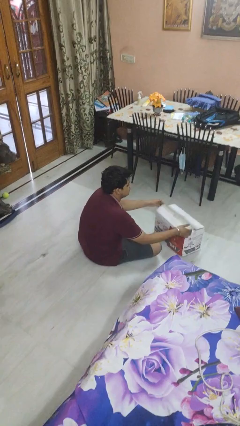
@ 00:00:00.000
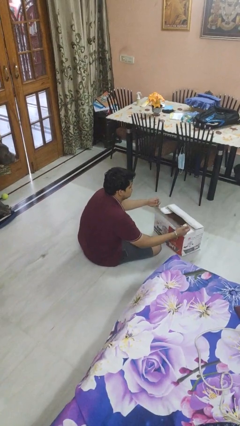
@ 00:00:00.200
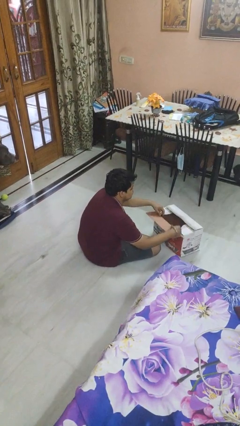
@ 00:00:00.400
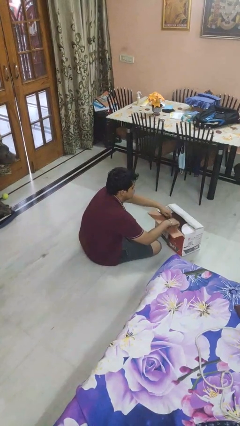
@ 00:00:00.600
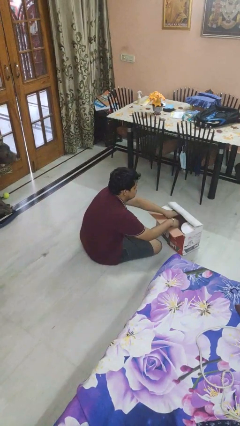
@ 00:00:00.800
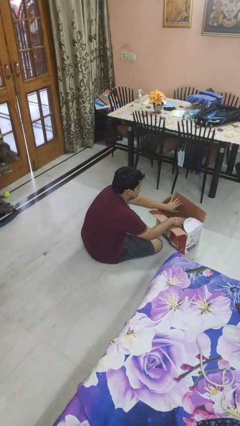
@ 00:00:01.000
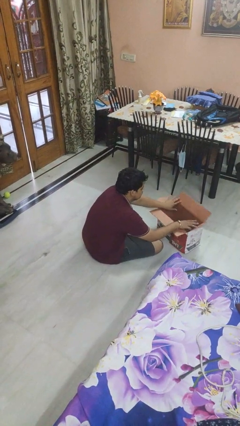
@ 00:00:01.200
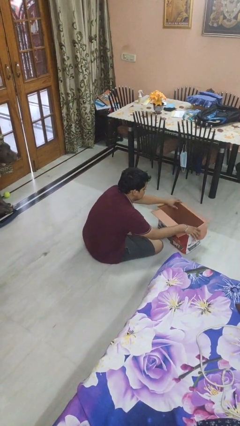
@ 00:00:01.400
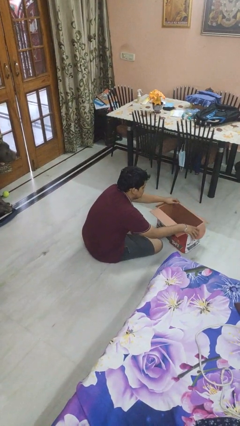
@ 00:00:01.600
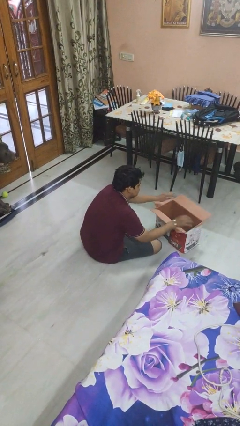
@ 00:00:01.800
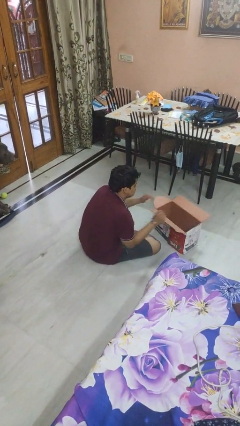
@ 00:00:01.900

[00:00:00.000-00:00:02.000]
person opens box

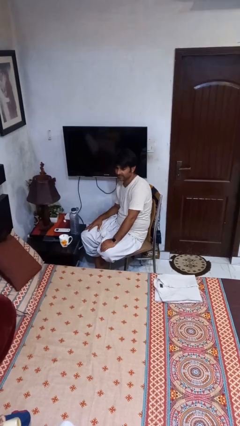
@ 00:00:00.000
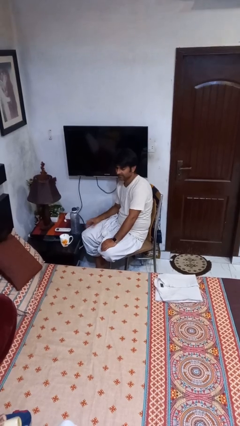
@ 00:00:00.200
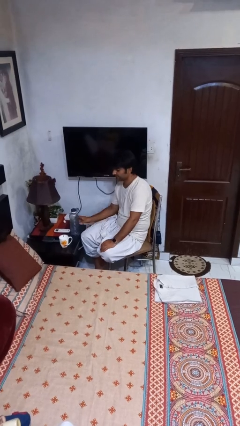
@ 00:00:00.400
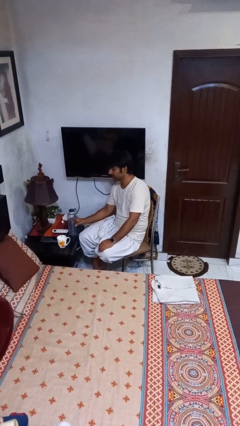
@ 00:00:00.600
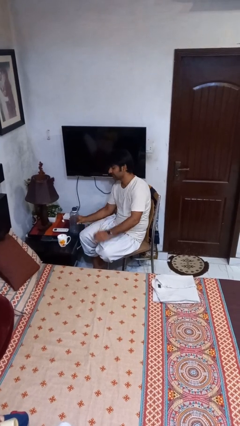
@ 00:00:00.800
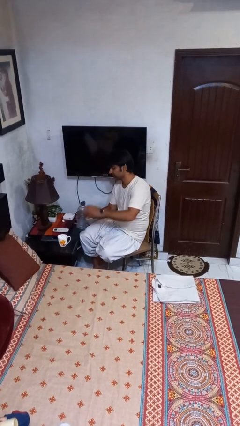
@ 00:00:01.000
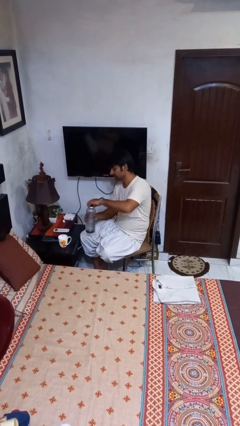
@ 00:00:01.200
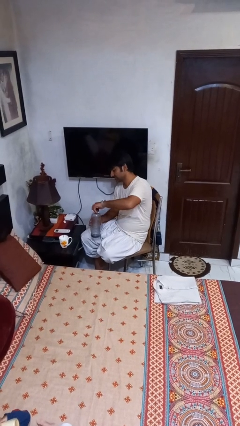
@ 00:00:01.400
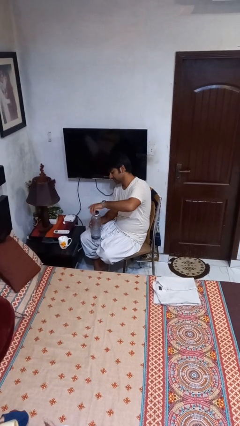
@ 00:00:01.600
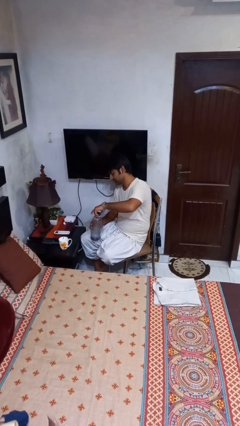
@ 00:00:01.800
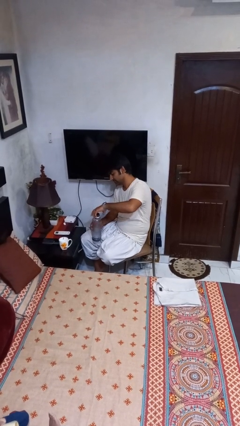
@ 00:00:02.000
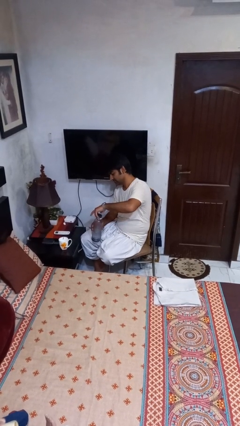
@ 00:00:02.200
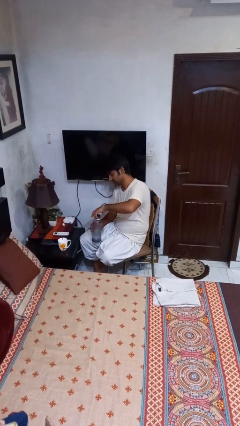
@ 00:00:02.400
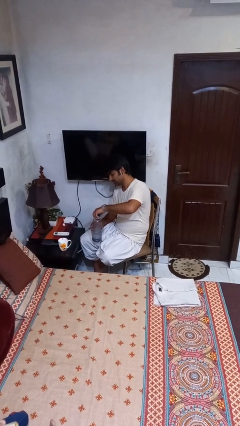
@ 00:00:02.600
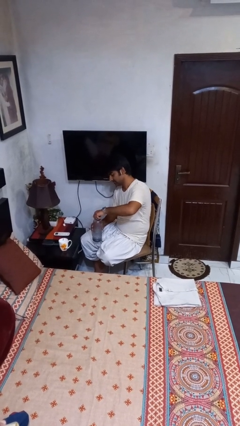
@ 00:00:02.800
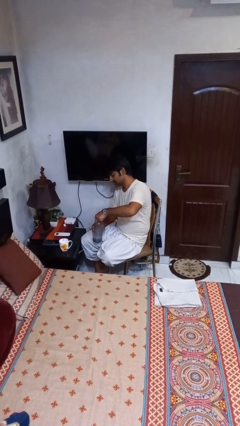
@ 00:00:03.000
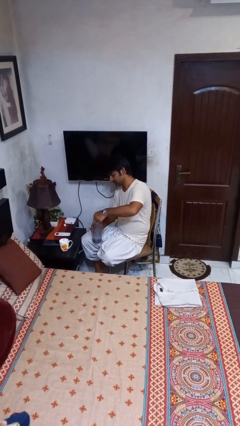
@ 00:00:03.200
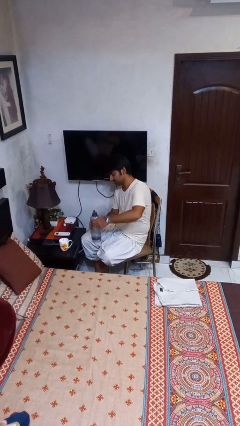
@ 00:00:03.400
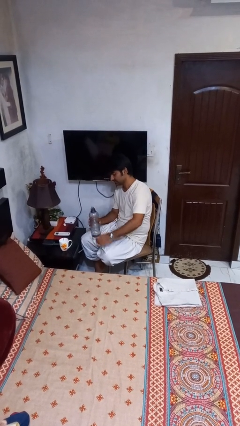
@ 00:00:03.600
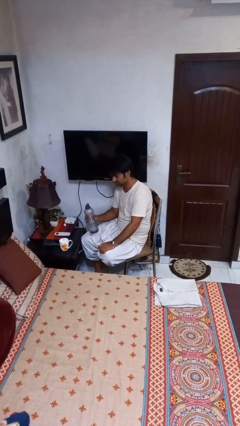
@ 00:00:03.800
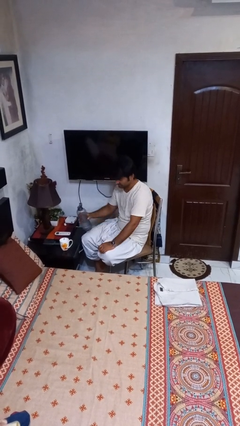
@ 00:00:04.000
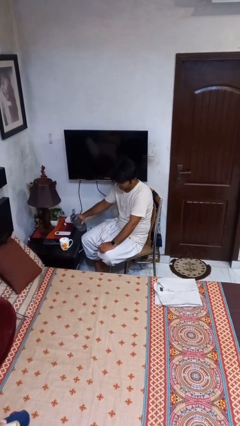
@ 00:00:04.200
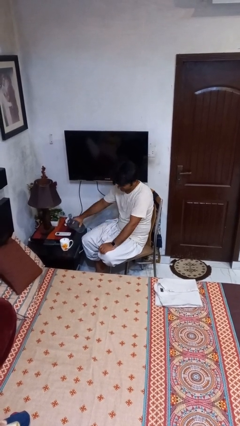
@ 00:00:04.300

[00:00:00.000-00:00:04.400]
person unscrews lid from bottle

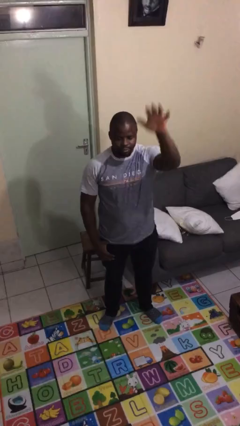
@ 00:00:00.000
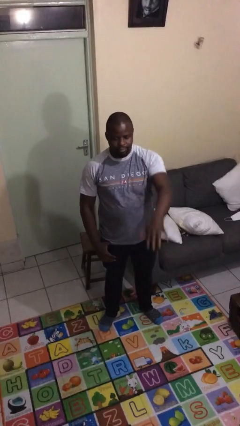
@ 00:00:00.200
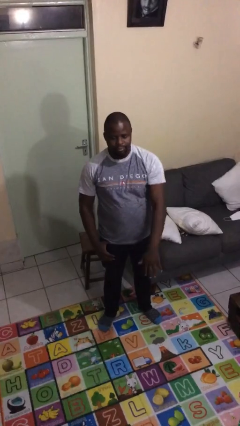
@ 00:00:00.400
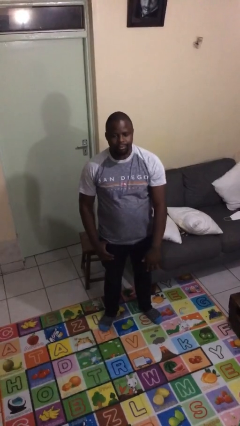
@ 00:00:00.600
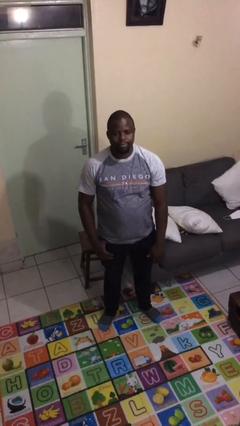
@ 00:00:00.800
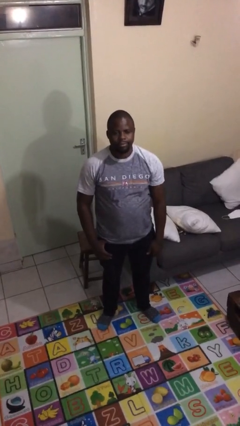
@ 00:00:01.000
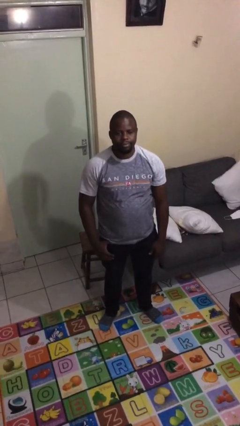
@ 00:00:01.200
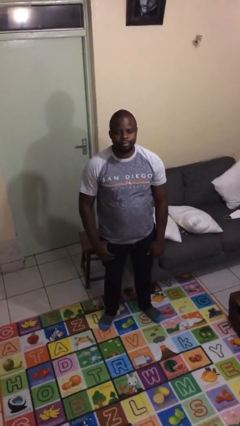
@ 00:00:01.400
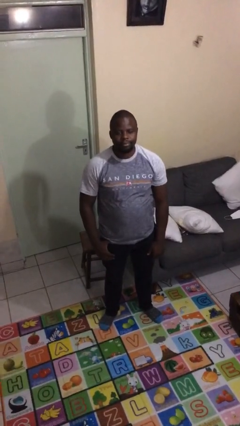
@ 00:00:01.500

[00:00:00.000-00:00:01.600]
person gestures swipe down

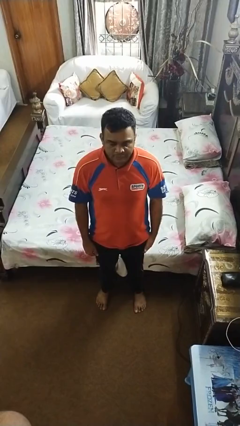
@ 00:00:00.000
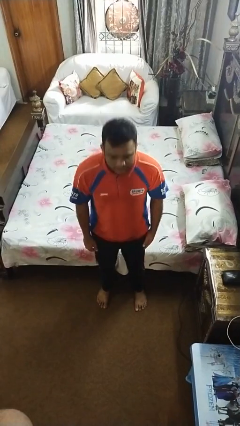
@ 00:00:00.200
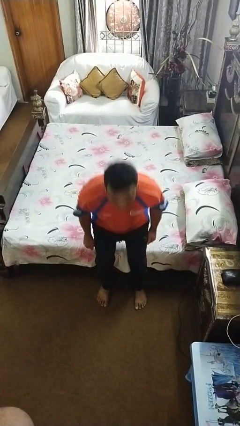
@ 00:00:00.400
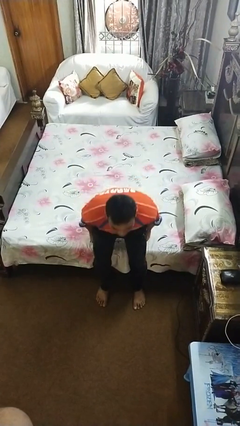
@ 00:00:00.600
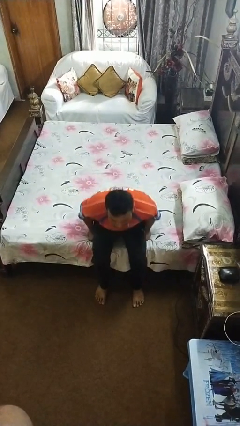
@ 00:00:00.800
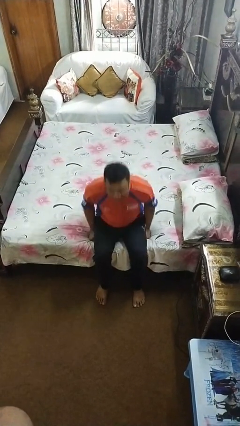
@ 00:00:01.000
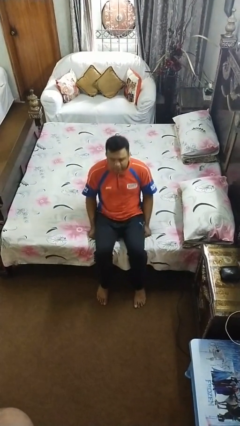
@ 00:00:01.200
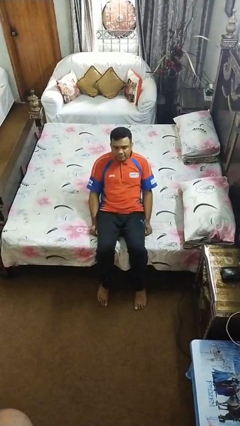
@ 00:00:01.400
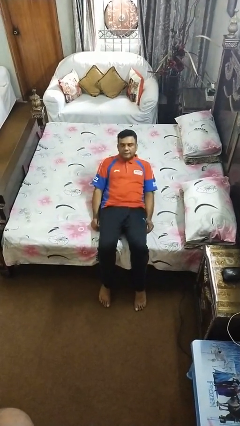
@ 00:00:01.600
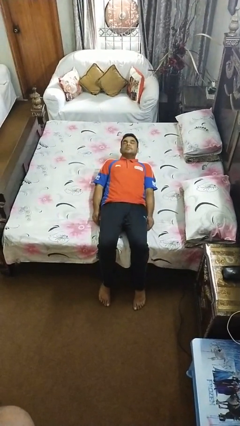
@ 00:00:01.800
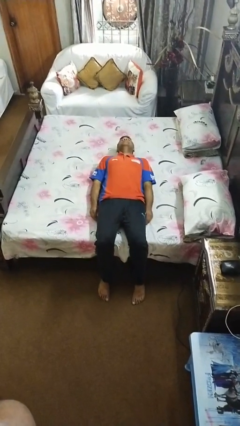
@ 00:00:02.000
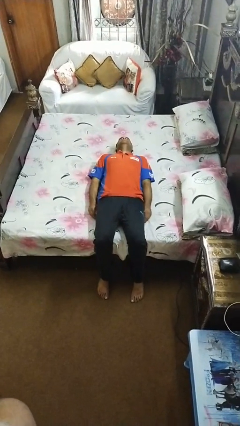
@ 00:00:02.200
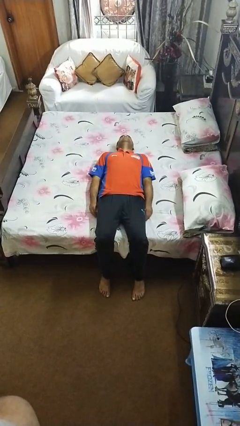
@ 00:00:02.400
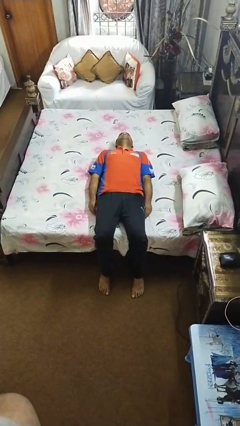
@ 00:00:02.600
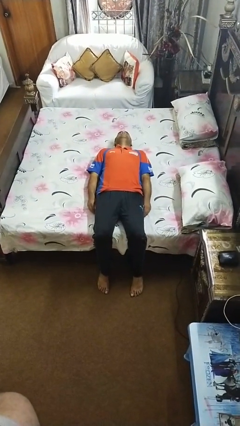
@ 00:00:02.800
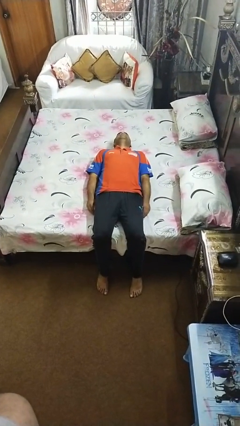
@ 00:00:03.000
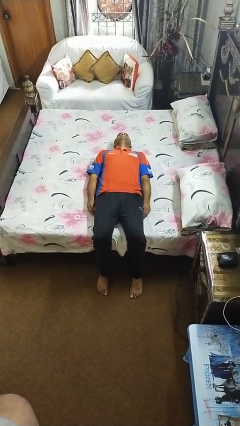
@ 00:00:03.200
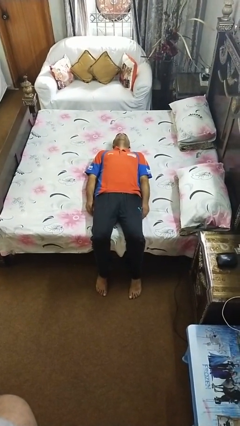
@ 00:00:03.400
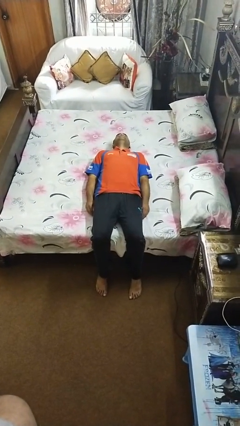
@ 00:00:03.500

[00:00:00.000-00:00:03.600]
person lies down on bed

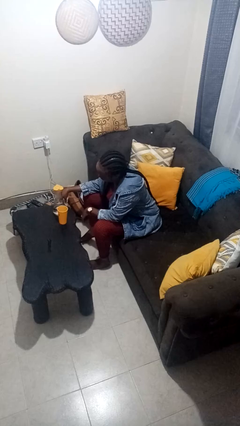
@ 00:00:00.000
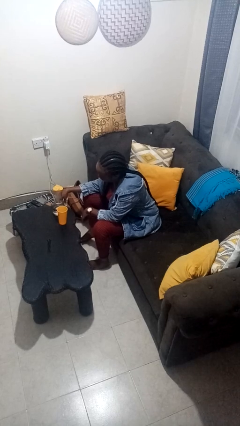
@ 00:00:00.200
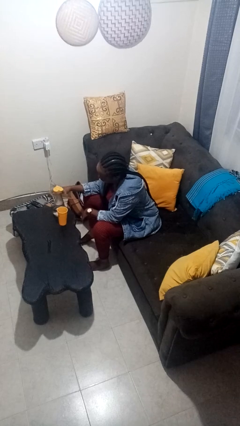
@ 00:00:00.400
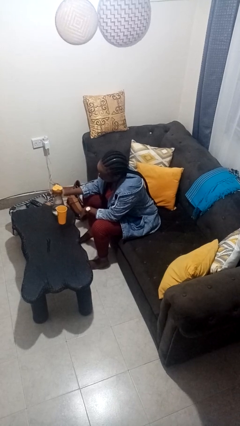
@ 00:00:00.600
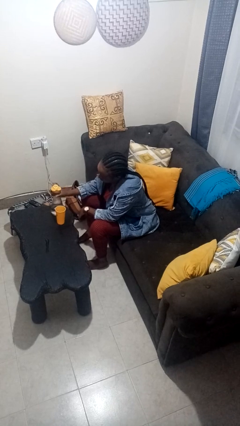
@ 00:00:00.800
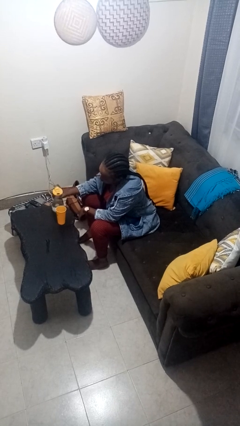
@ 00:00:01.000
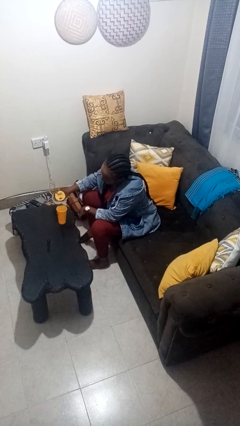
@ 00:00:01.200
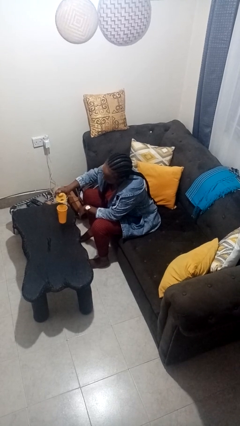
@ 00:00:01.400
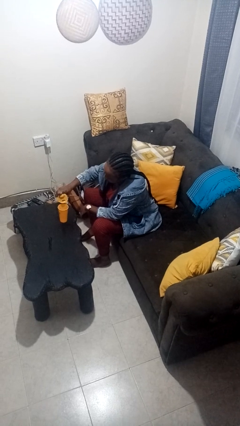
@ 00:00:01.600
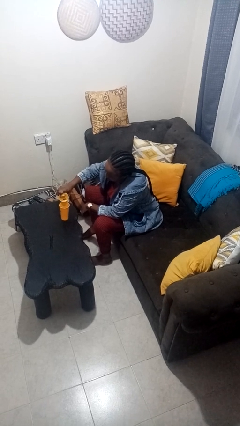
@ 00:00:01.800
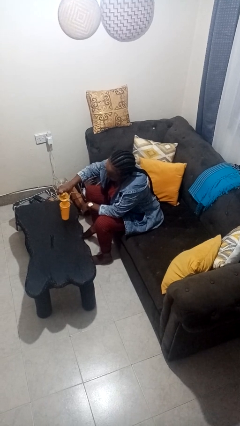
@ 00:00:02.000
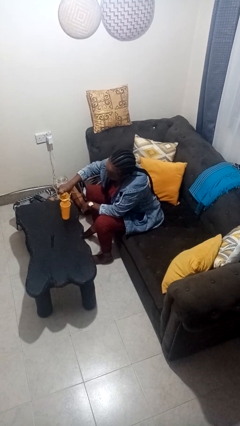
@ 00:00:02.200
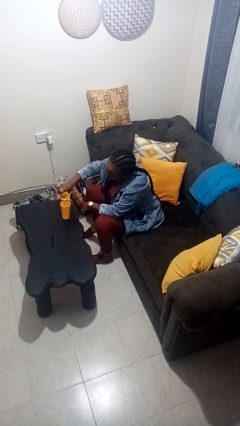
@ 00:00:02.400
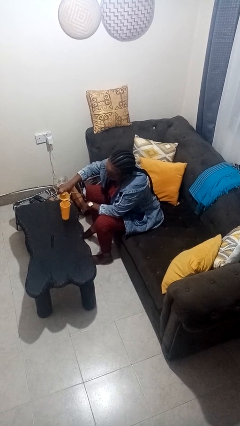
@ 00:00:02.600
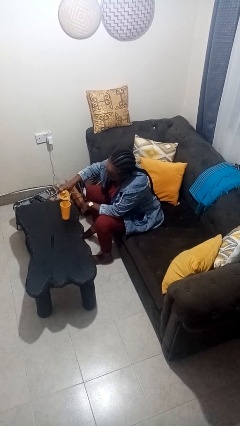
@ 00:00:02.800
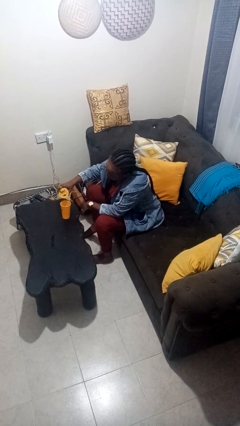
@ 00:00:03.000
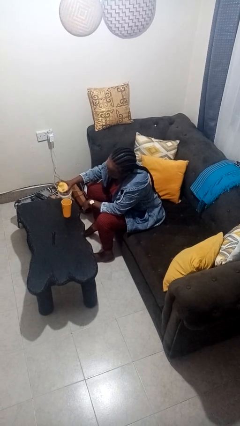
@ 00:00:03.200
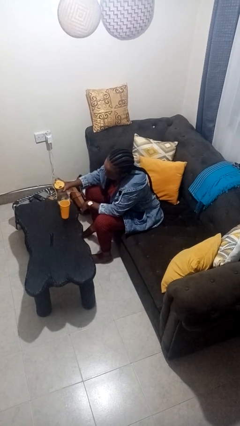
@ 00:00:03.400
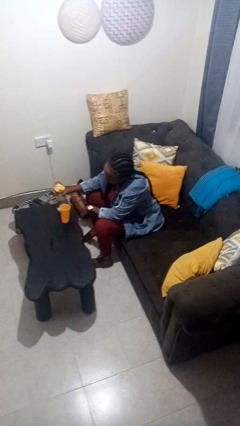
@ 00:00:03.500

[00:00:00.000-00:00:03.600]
person pours liquid into cup

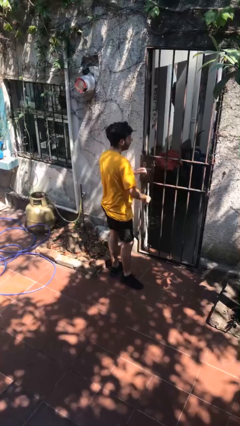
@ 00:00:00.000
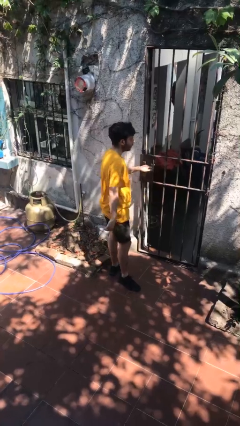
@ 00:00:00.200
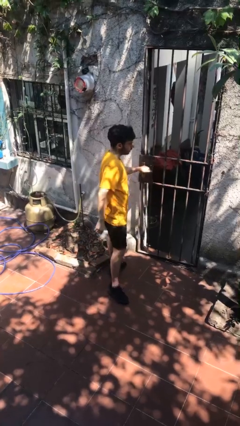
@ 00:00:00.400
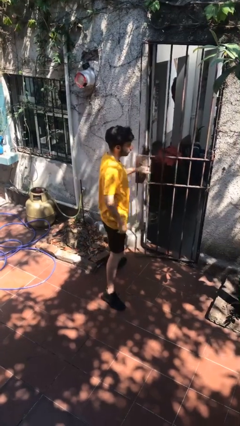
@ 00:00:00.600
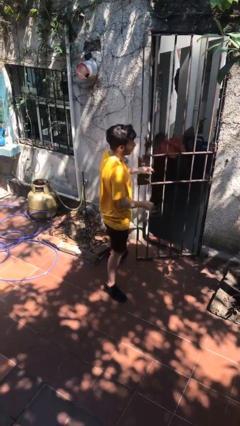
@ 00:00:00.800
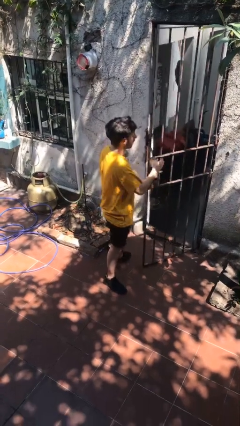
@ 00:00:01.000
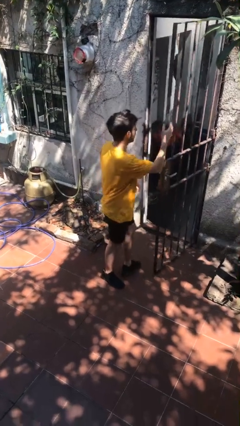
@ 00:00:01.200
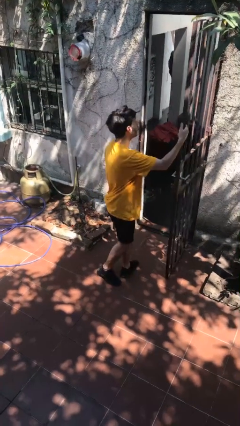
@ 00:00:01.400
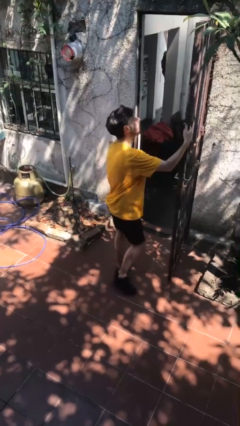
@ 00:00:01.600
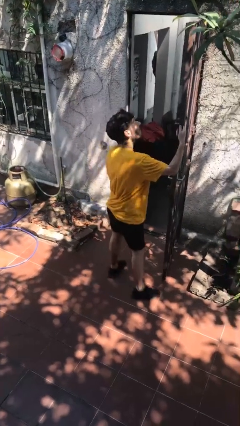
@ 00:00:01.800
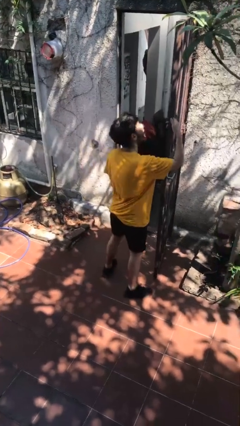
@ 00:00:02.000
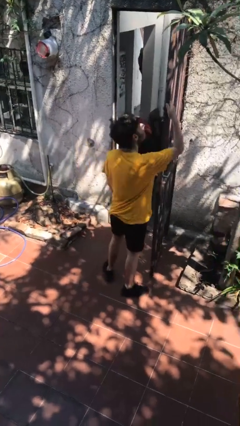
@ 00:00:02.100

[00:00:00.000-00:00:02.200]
person opens facility door
